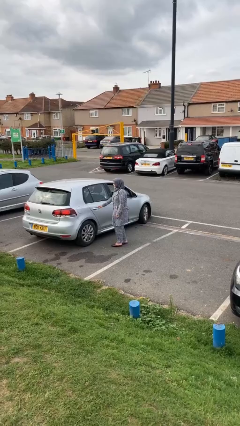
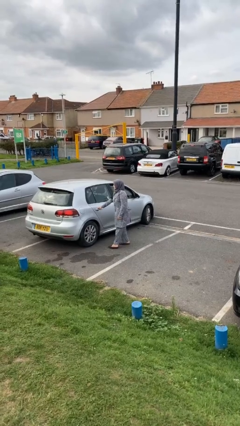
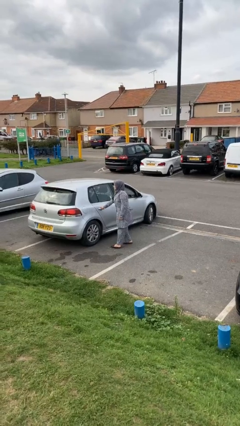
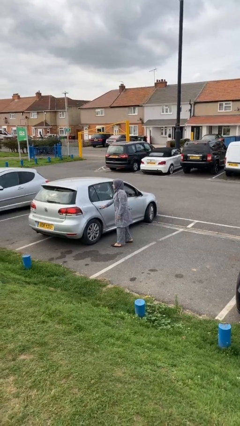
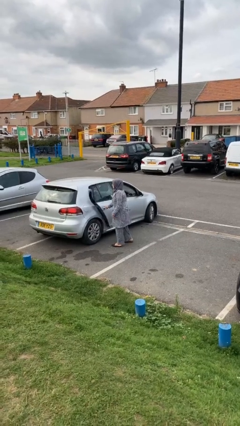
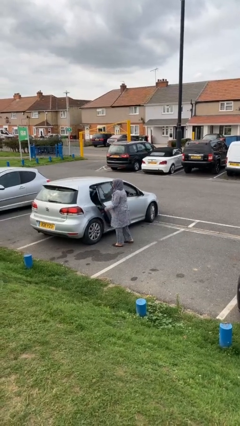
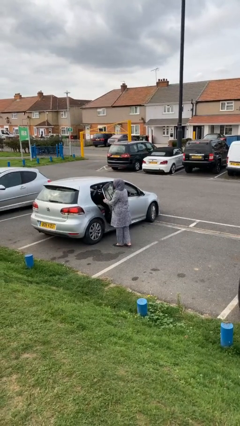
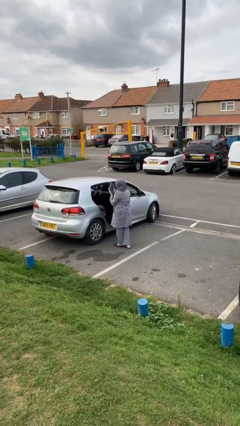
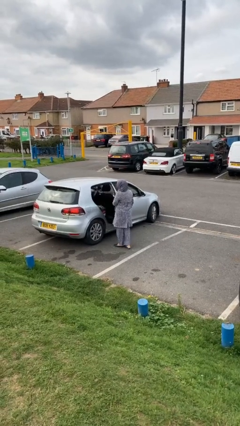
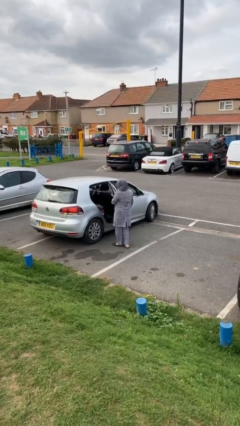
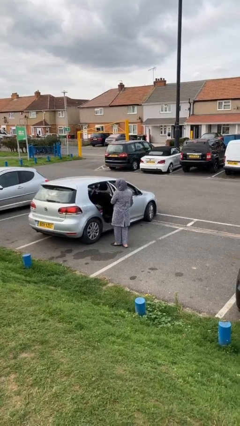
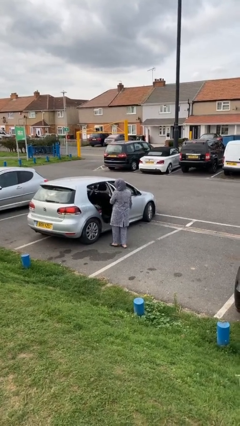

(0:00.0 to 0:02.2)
person opens car door

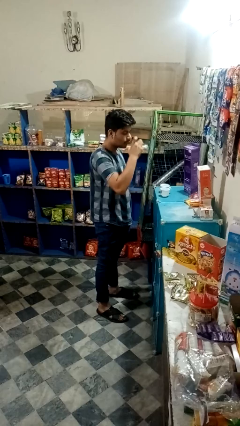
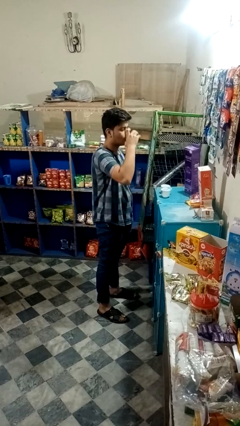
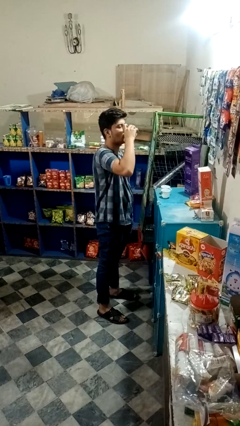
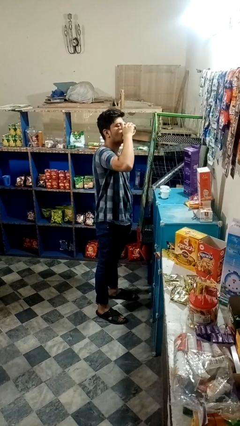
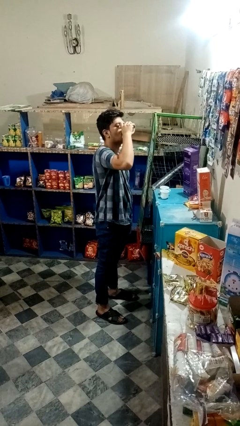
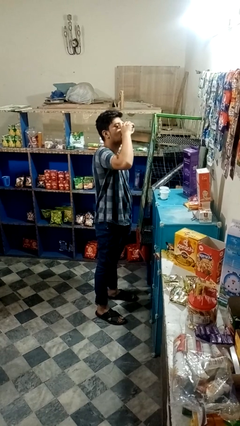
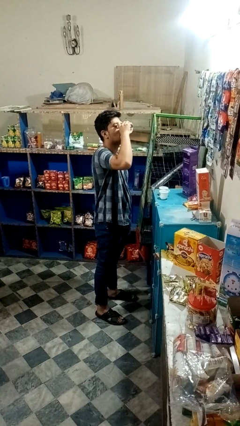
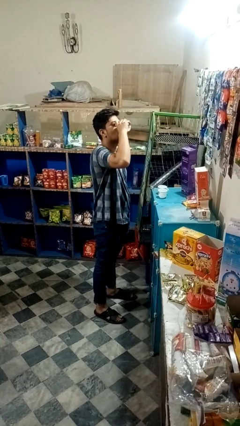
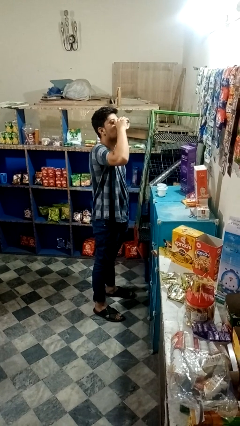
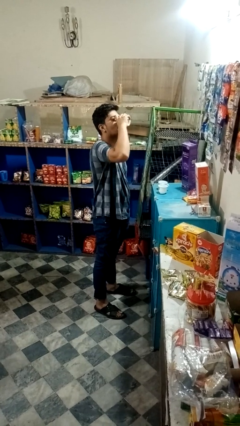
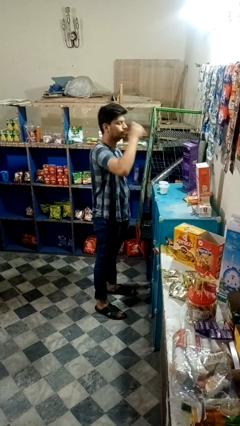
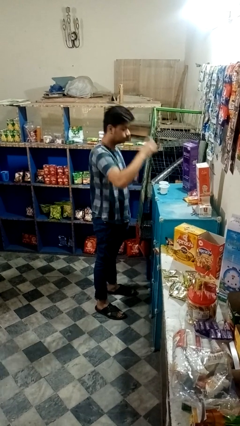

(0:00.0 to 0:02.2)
person drinks from shotglass

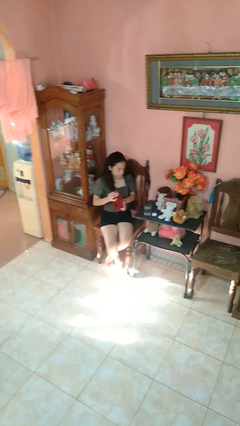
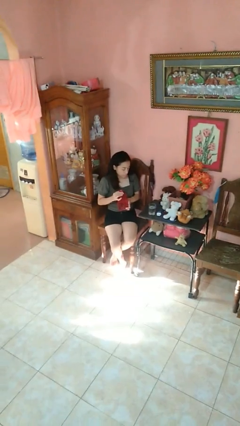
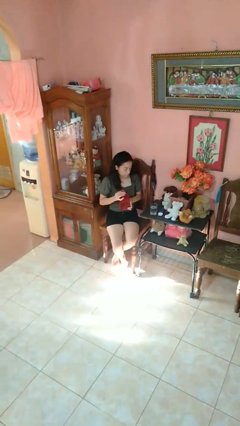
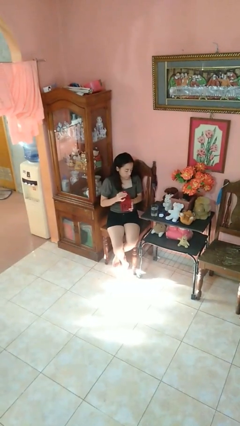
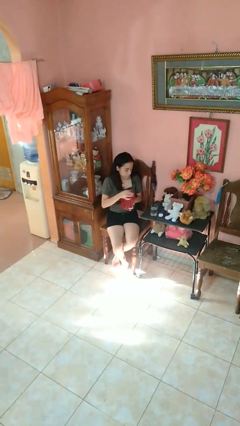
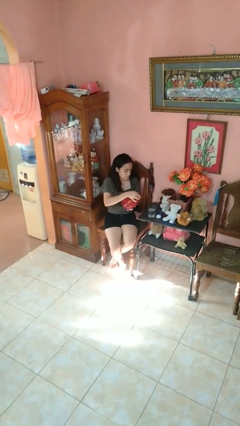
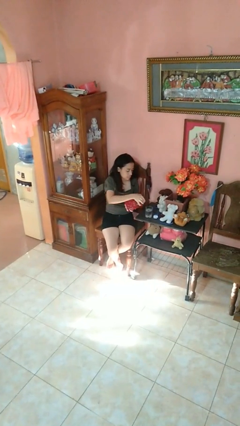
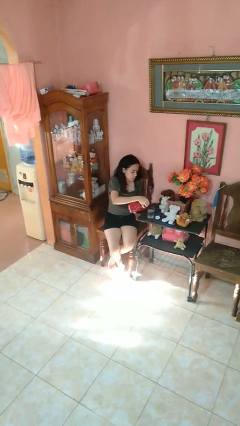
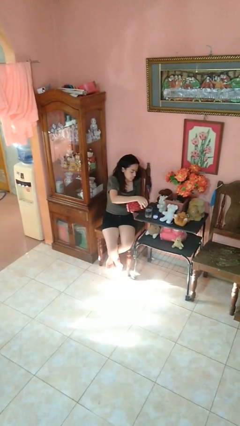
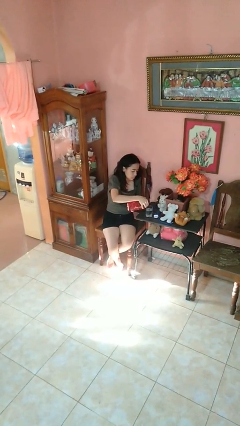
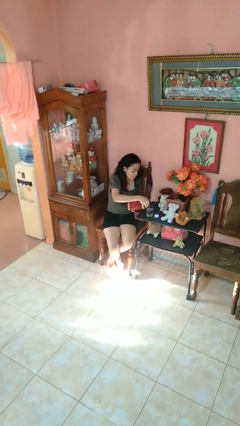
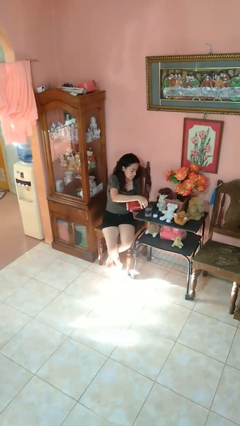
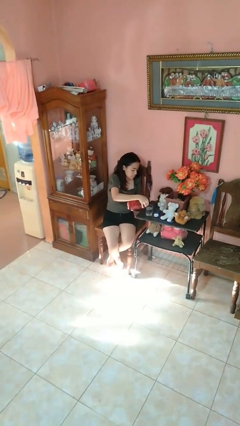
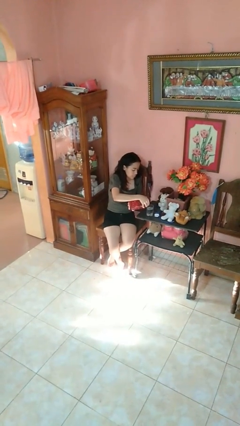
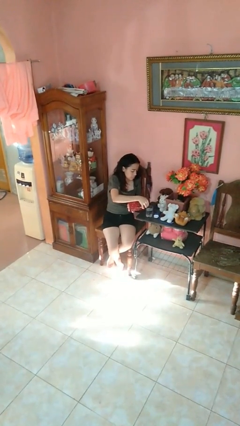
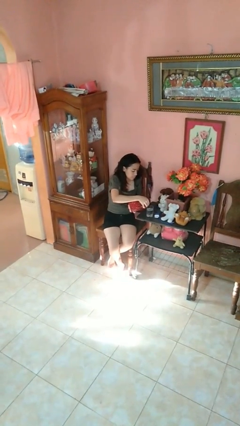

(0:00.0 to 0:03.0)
person pours liquid into cup

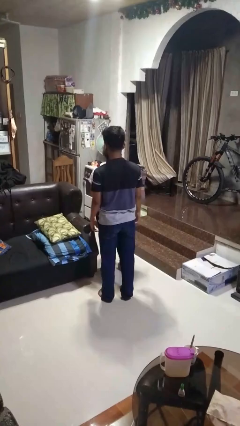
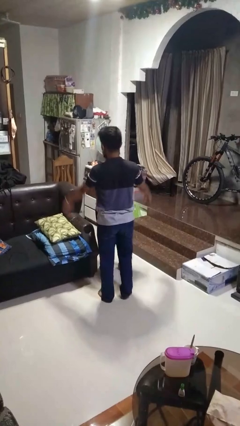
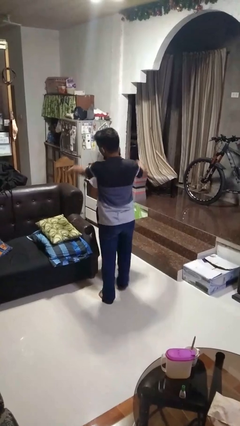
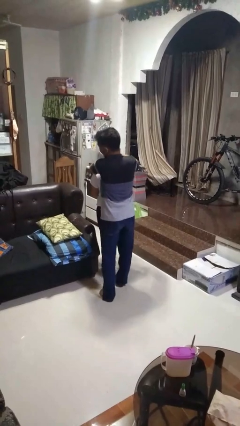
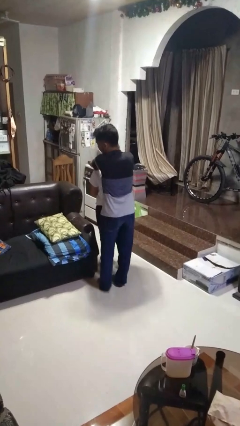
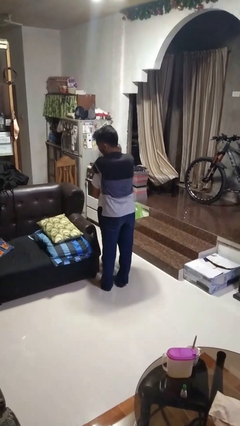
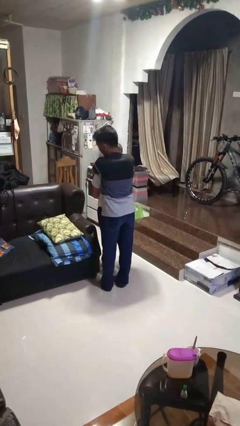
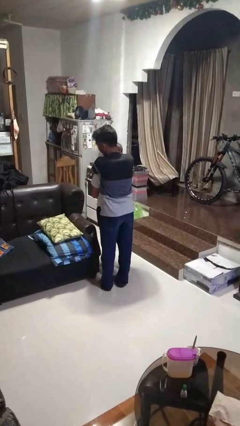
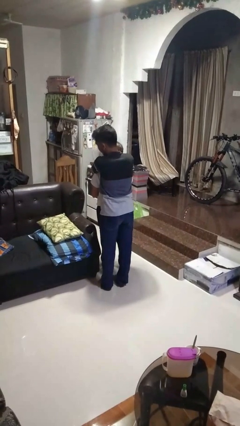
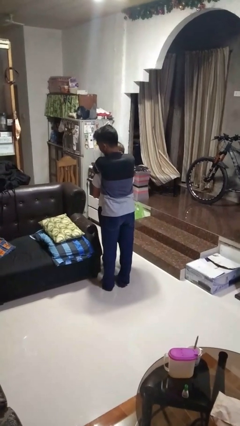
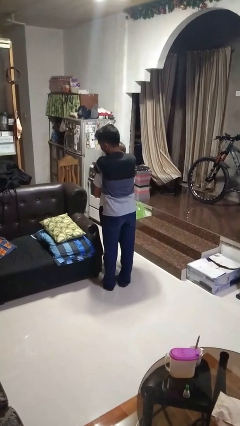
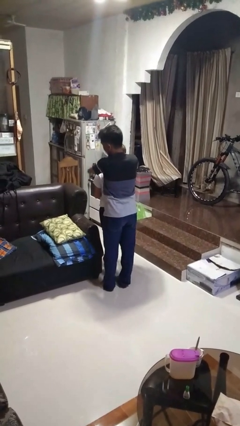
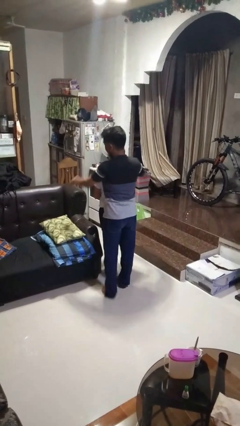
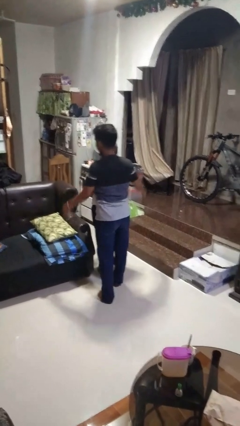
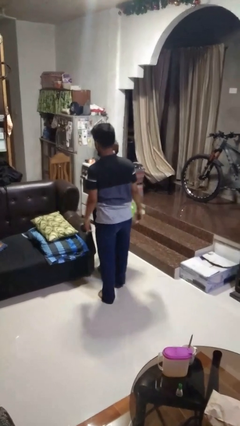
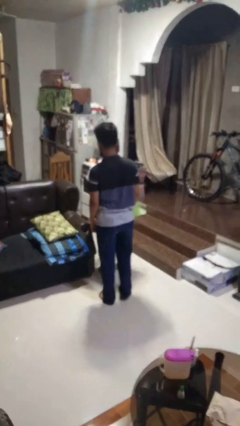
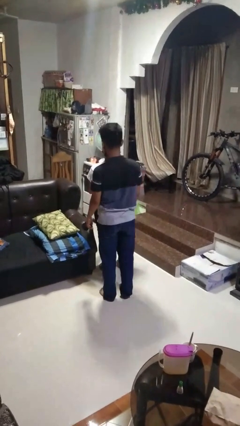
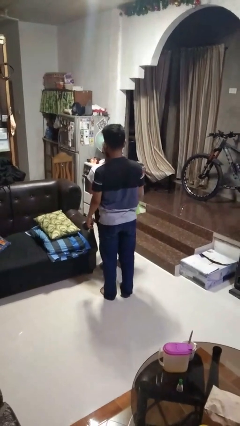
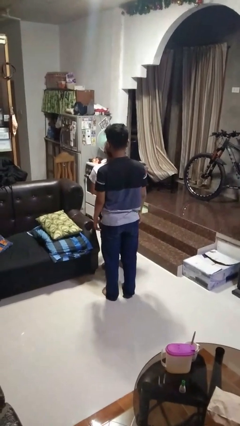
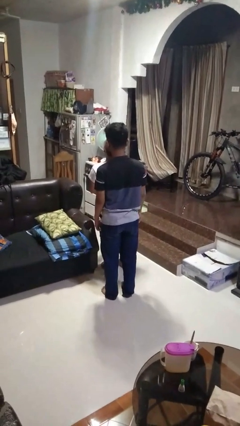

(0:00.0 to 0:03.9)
person hugs person from behind

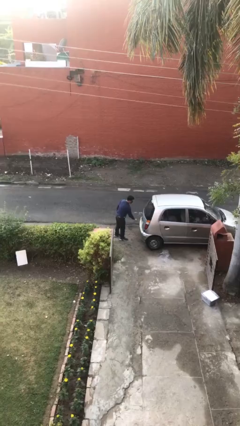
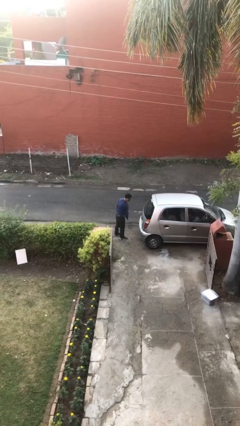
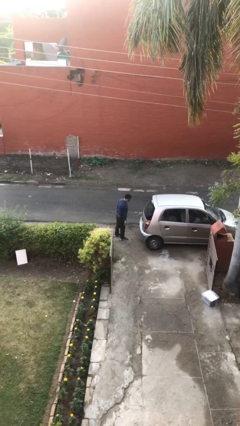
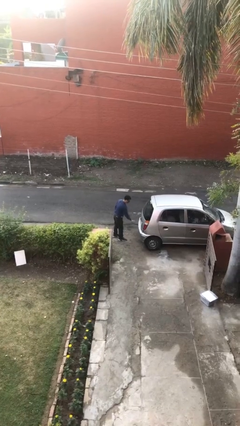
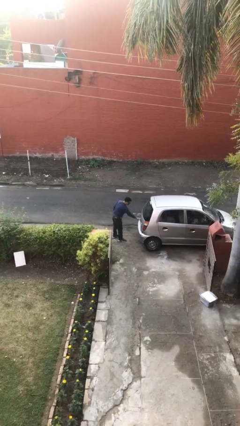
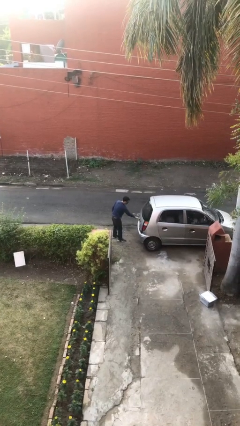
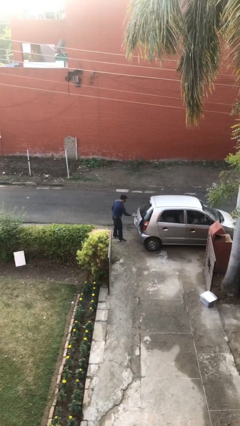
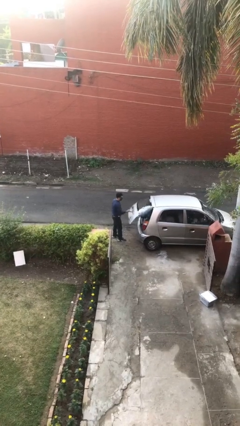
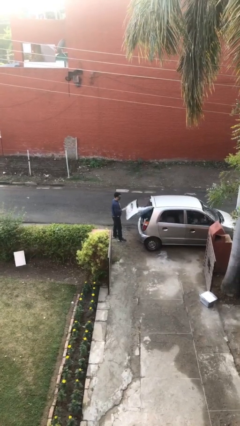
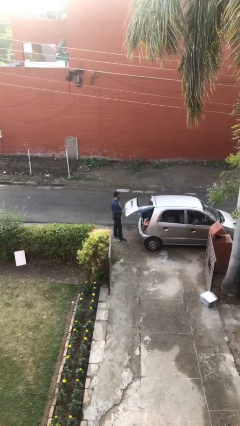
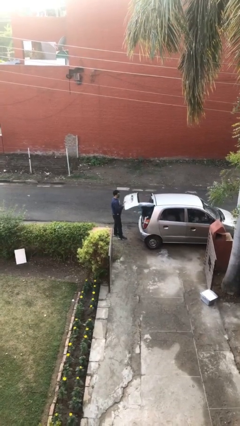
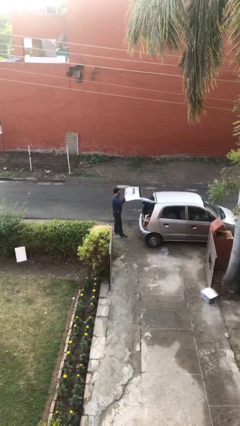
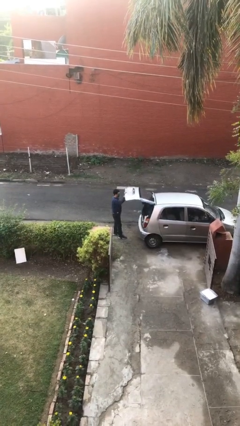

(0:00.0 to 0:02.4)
person opens car trunk

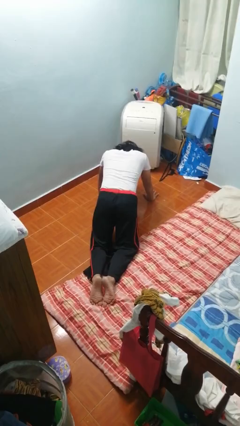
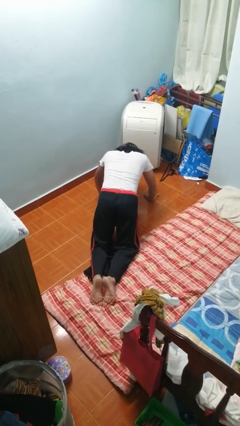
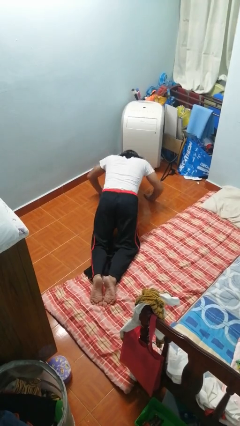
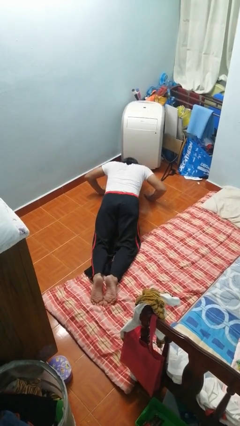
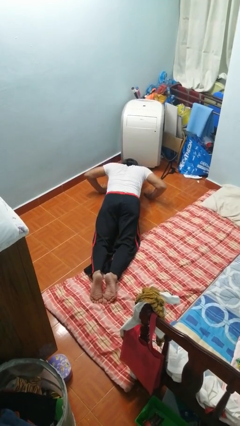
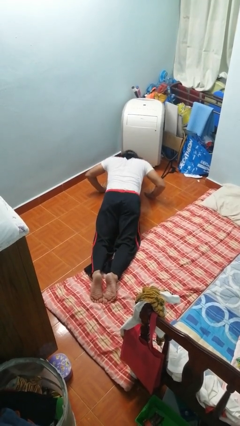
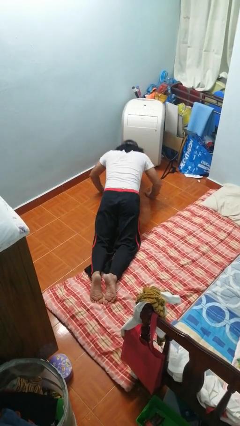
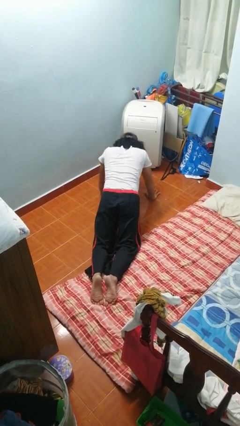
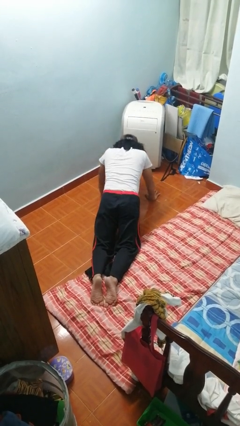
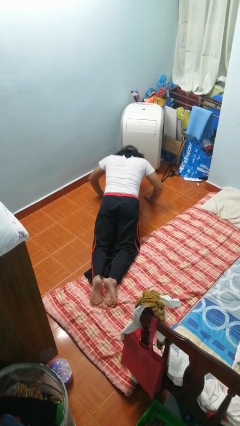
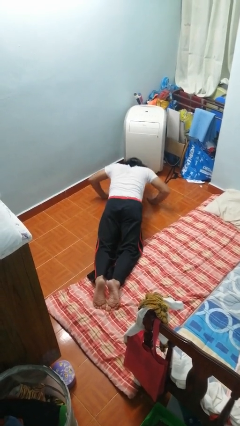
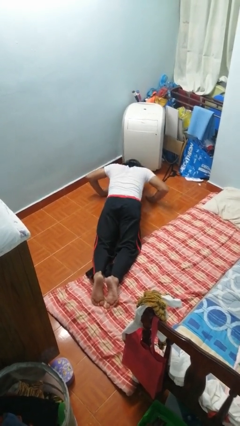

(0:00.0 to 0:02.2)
person exercises with pushup

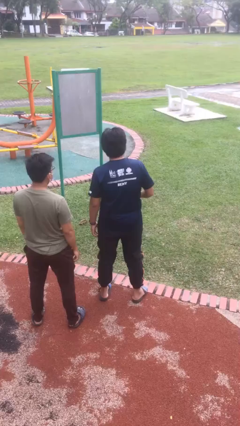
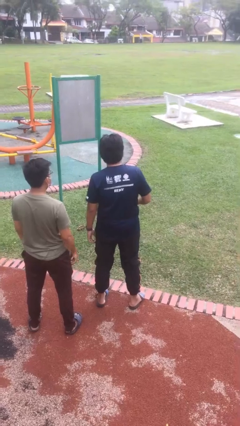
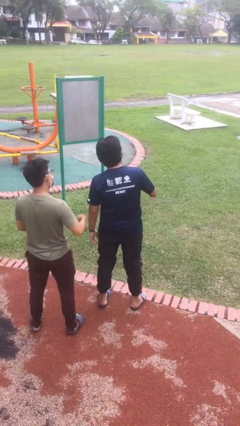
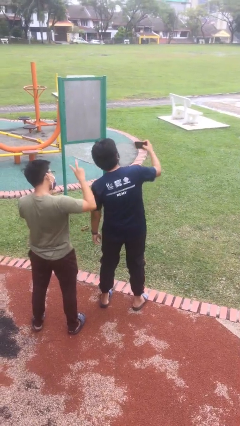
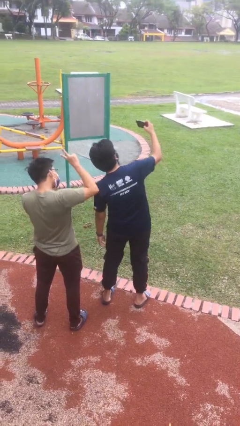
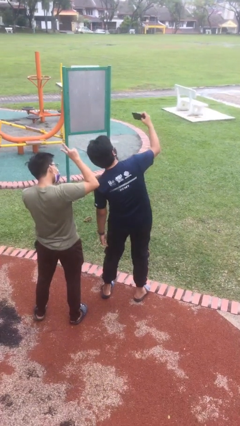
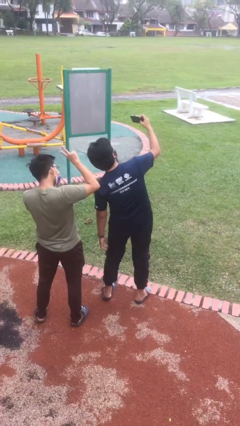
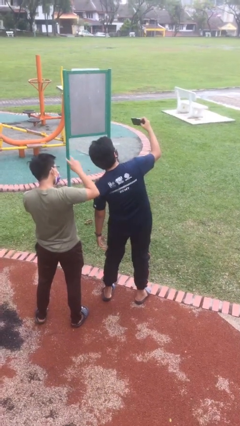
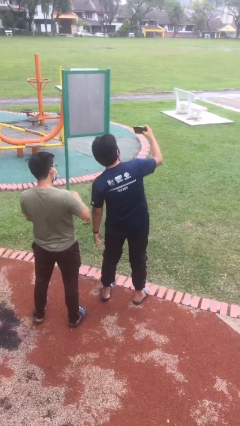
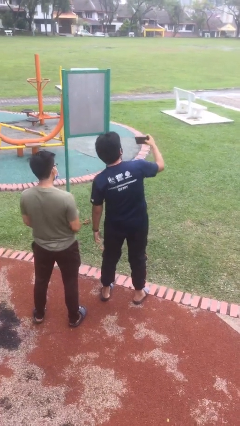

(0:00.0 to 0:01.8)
person takes selfie with person
